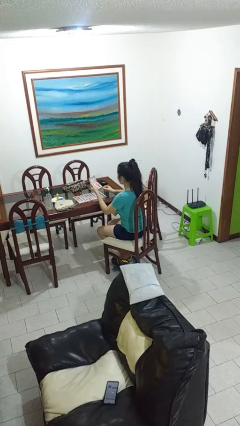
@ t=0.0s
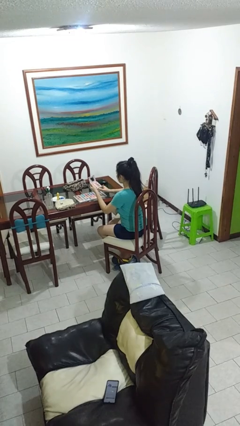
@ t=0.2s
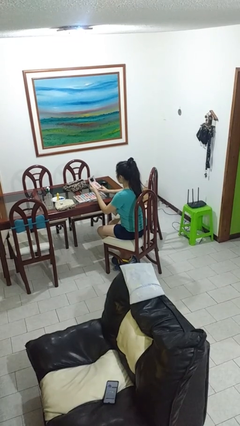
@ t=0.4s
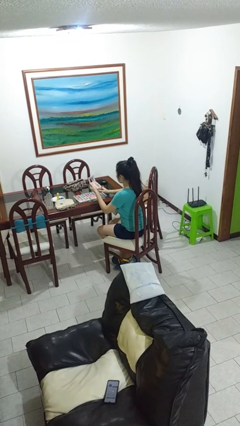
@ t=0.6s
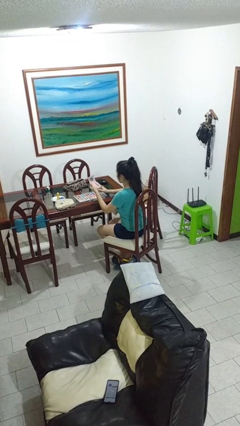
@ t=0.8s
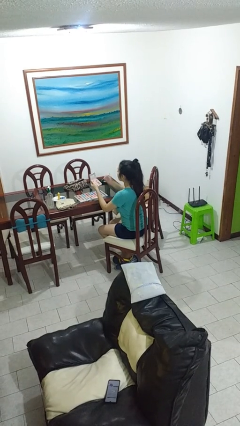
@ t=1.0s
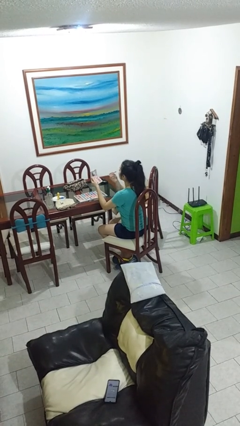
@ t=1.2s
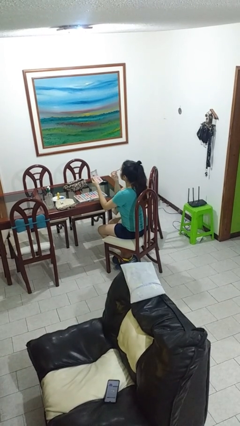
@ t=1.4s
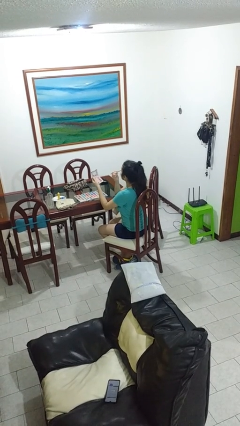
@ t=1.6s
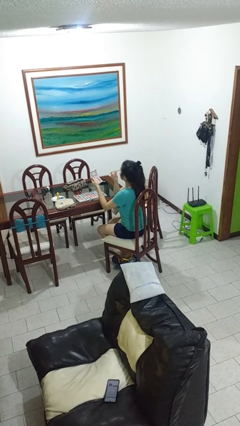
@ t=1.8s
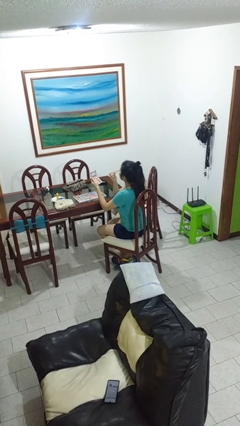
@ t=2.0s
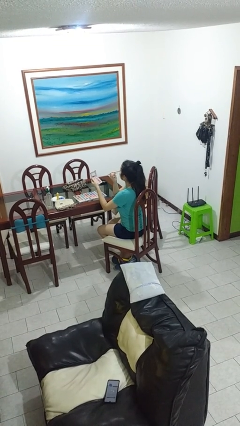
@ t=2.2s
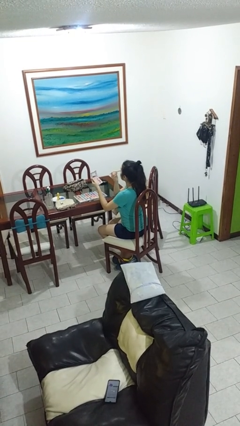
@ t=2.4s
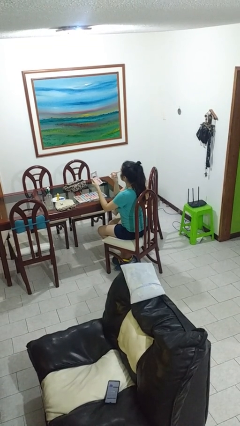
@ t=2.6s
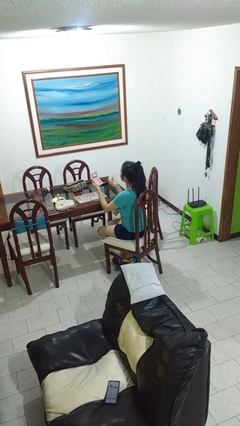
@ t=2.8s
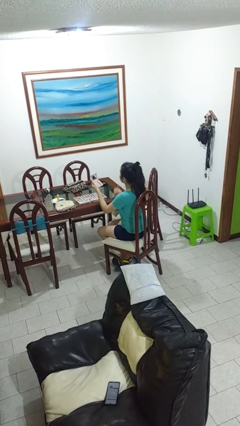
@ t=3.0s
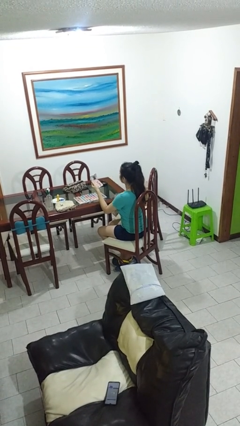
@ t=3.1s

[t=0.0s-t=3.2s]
person applies eye makeup

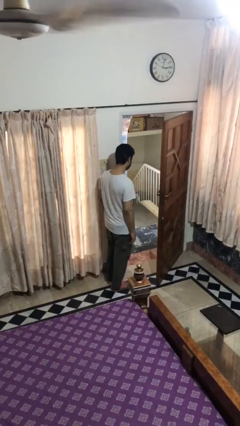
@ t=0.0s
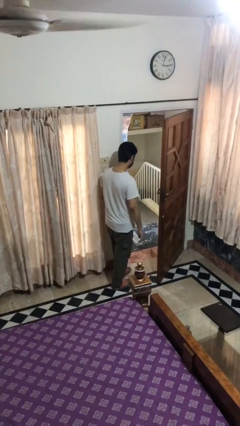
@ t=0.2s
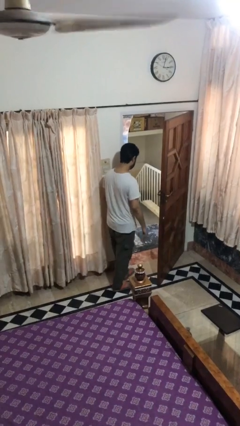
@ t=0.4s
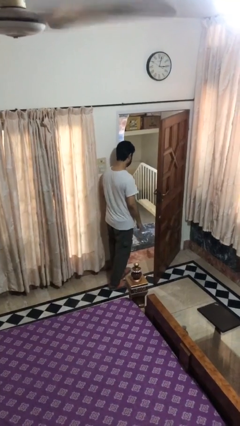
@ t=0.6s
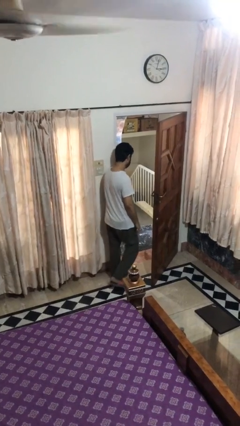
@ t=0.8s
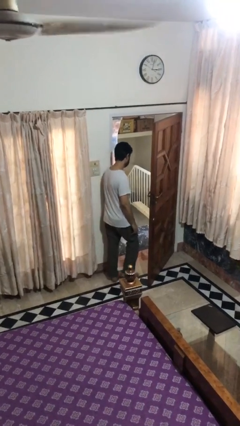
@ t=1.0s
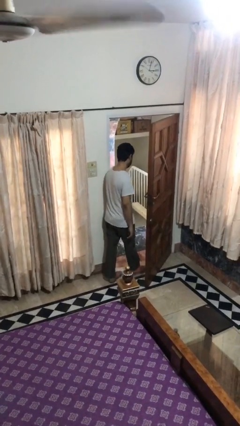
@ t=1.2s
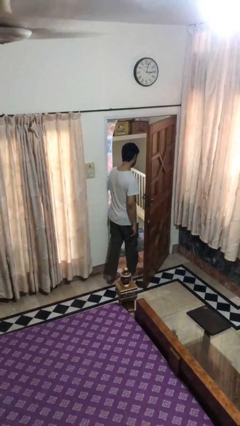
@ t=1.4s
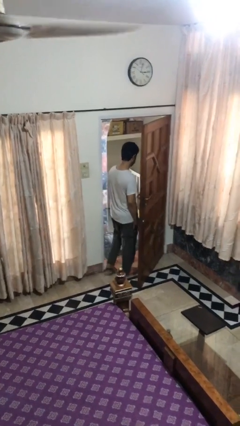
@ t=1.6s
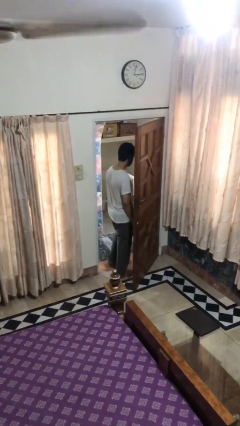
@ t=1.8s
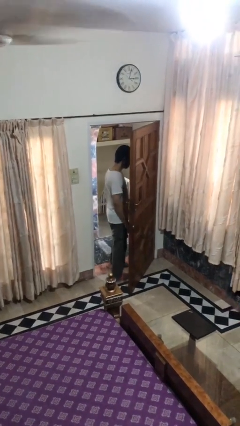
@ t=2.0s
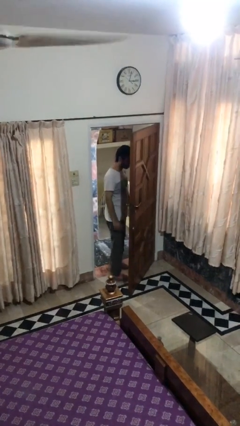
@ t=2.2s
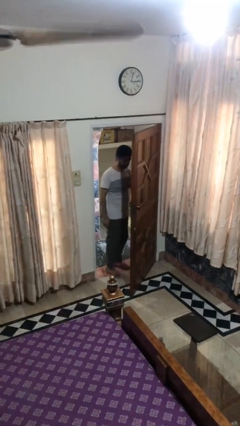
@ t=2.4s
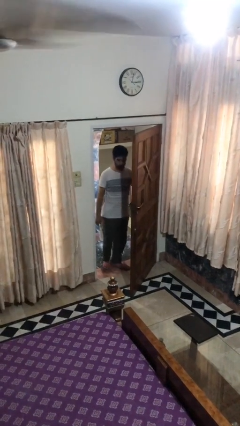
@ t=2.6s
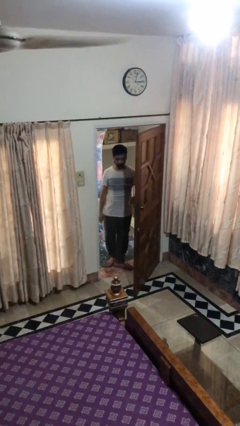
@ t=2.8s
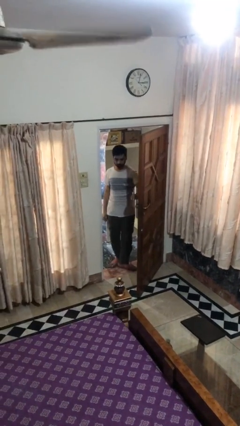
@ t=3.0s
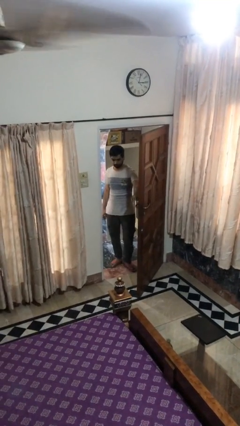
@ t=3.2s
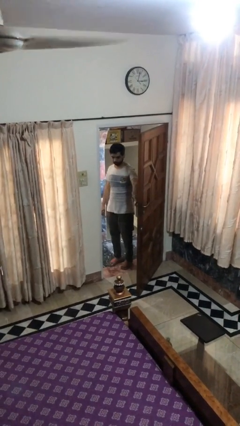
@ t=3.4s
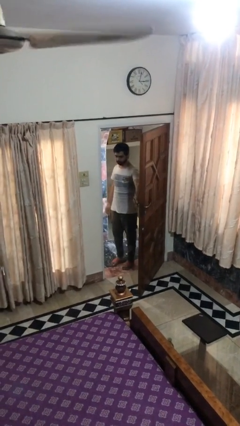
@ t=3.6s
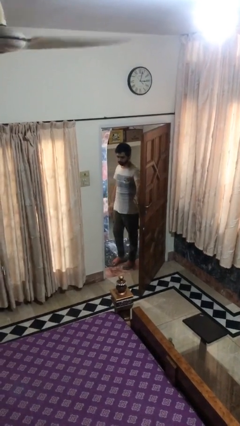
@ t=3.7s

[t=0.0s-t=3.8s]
person exits scene through structure

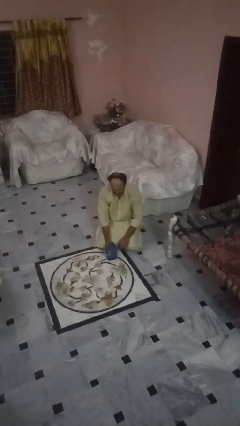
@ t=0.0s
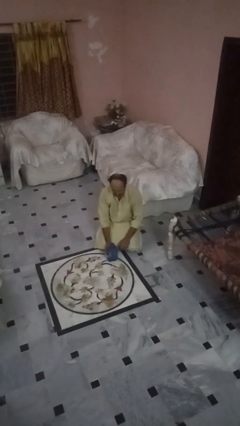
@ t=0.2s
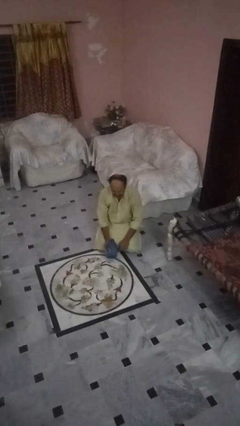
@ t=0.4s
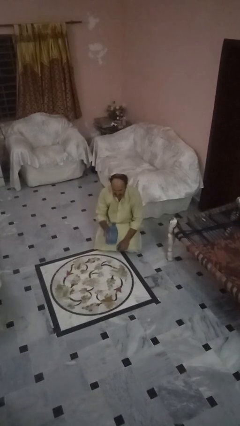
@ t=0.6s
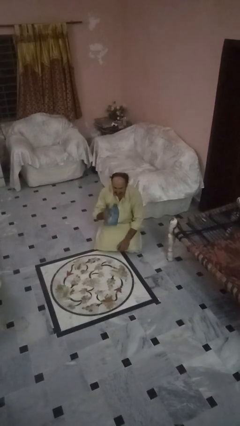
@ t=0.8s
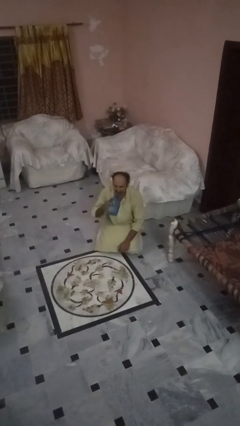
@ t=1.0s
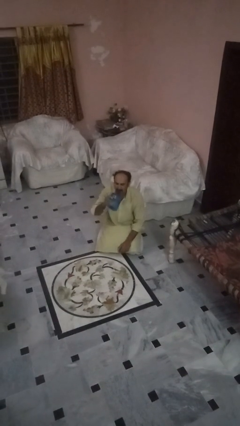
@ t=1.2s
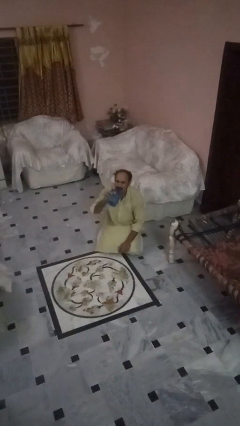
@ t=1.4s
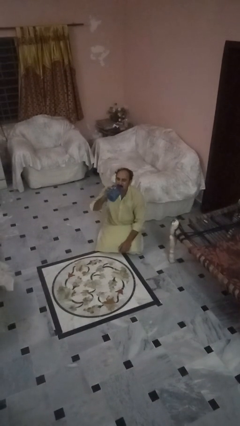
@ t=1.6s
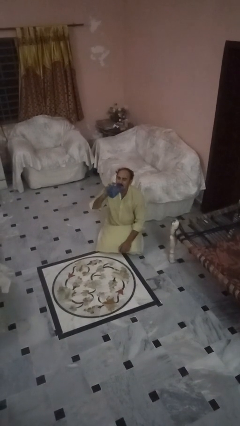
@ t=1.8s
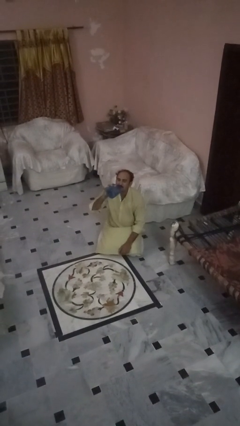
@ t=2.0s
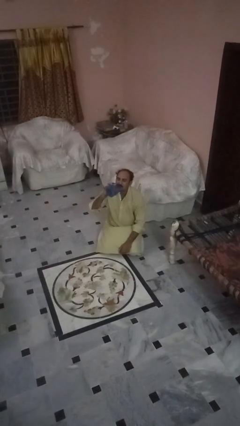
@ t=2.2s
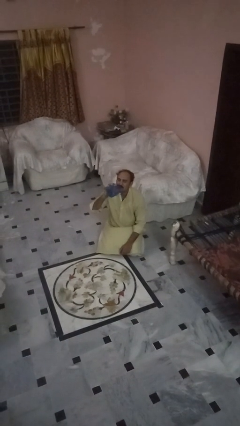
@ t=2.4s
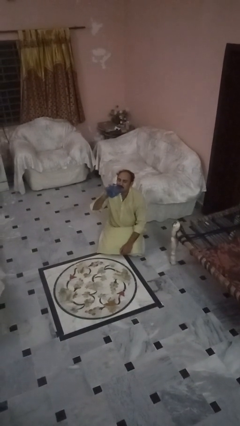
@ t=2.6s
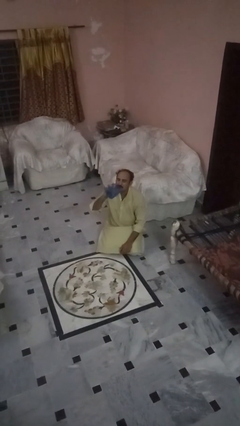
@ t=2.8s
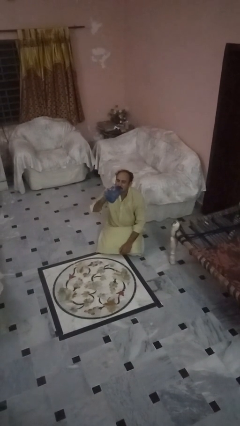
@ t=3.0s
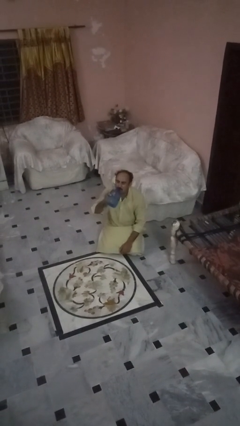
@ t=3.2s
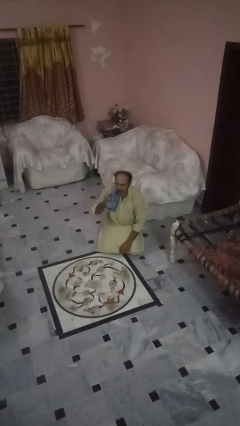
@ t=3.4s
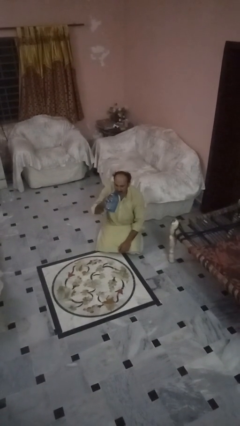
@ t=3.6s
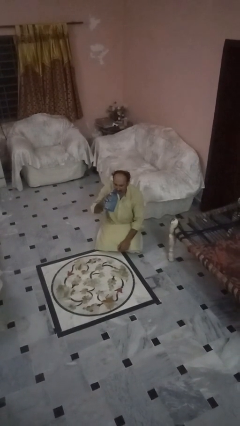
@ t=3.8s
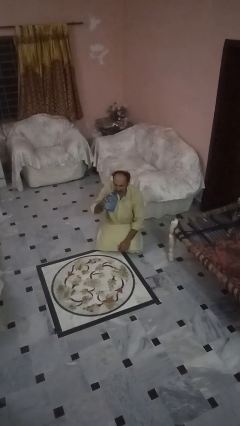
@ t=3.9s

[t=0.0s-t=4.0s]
person drinks from bottle

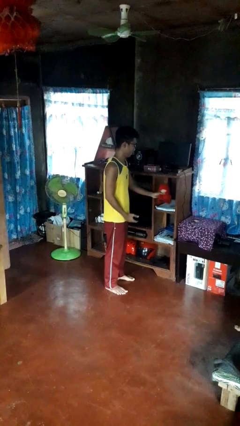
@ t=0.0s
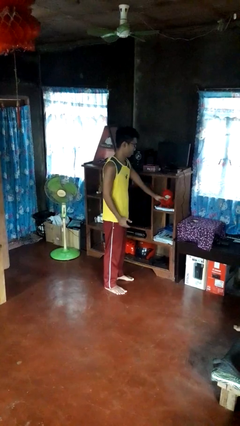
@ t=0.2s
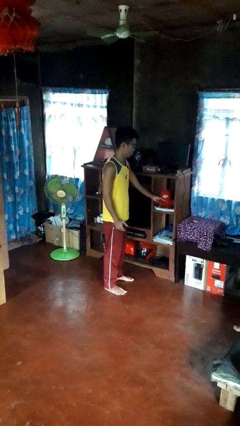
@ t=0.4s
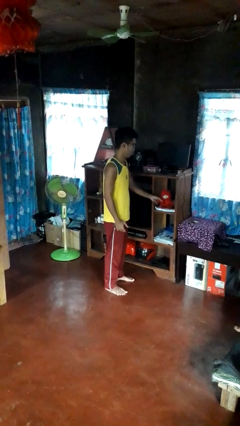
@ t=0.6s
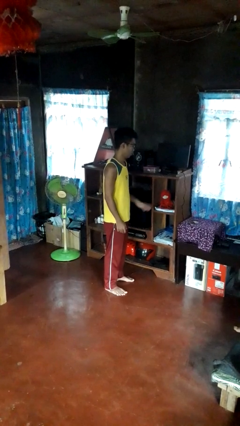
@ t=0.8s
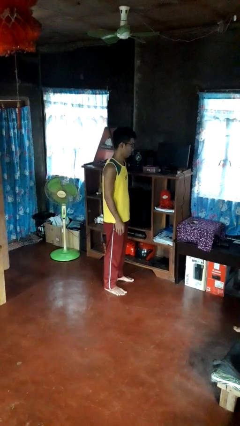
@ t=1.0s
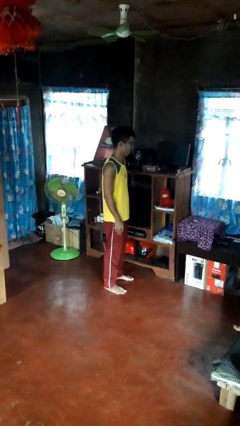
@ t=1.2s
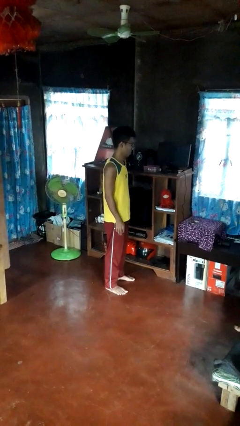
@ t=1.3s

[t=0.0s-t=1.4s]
person puts down object on shelf

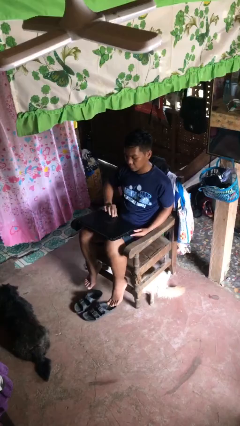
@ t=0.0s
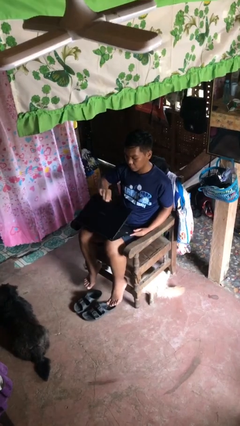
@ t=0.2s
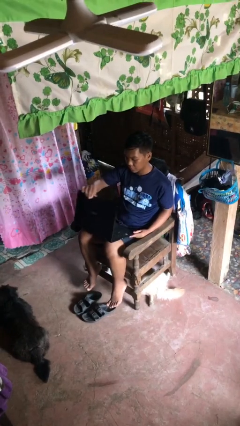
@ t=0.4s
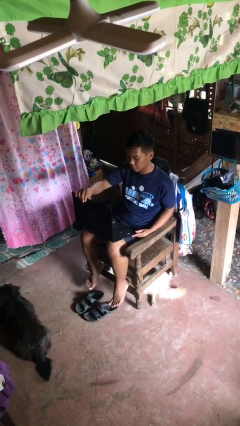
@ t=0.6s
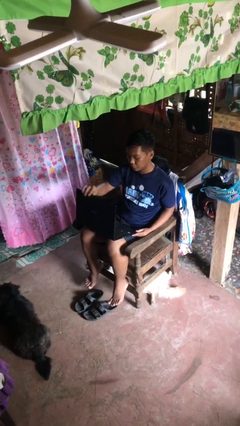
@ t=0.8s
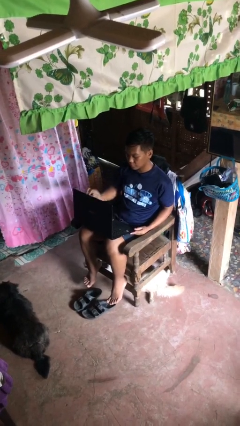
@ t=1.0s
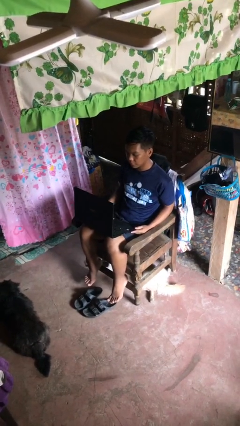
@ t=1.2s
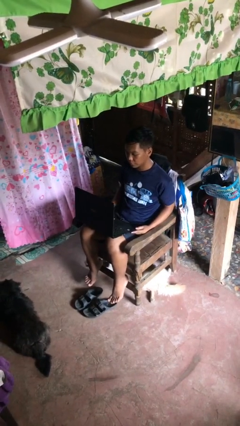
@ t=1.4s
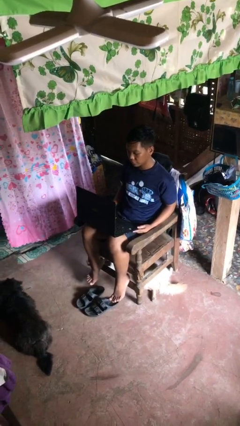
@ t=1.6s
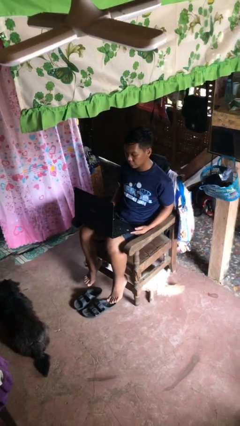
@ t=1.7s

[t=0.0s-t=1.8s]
person opens laptop

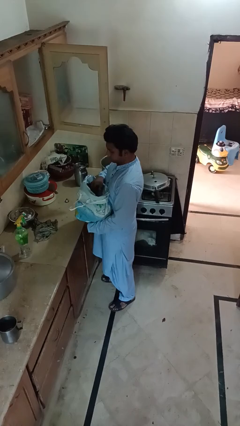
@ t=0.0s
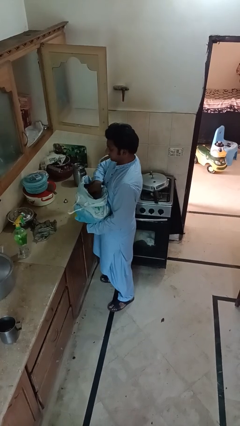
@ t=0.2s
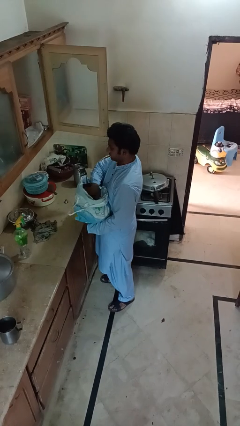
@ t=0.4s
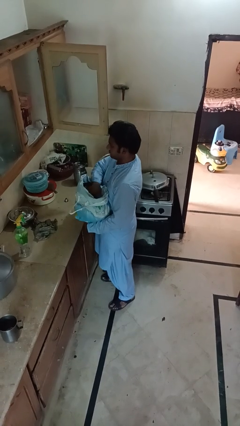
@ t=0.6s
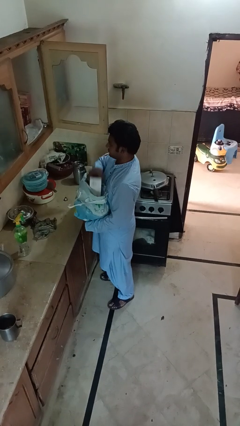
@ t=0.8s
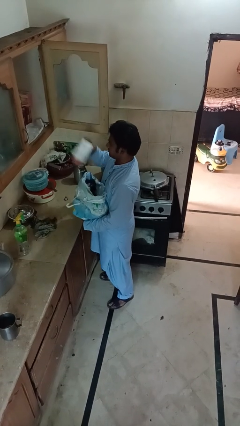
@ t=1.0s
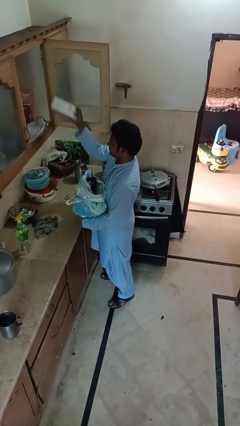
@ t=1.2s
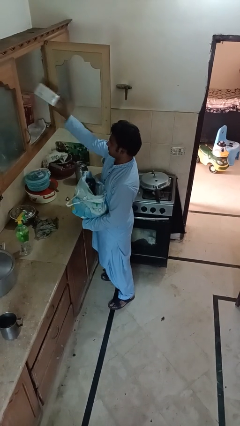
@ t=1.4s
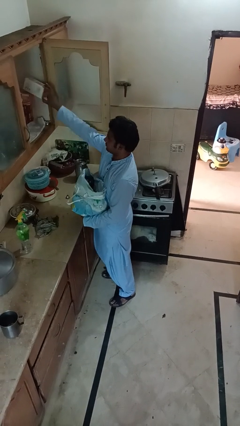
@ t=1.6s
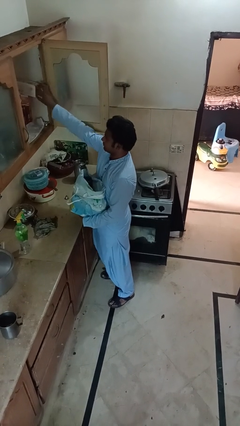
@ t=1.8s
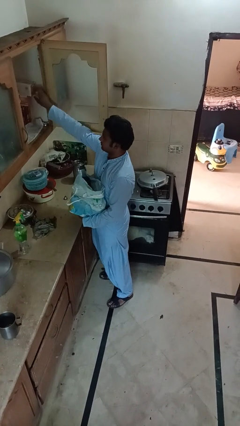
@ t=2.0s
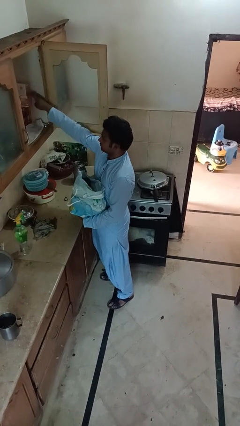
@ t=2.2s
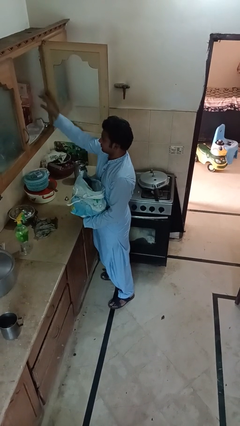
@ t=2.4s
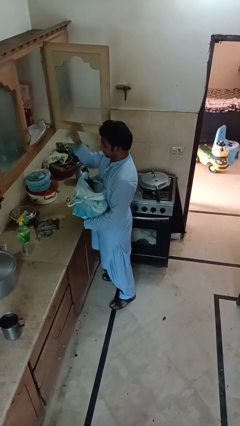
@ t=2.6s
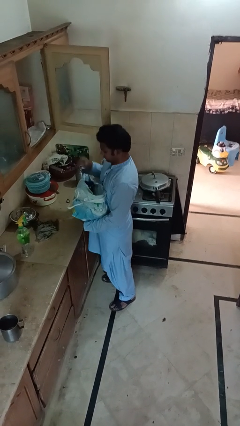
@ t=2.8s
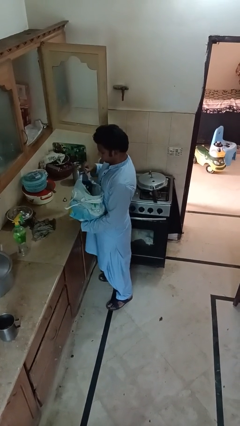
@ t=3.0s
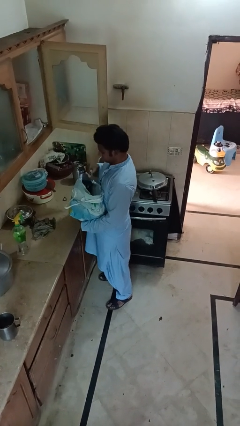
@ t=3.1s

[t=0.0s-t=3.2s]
person loads groceries into cabinet
